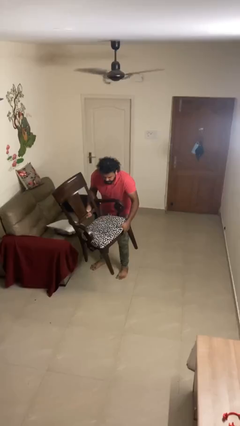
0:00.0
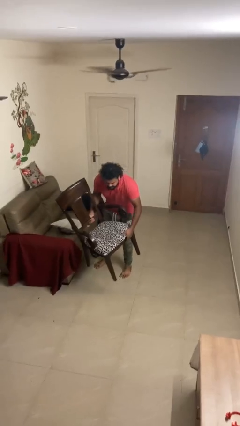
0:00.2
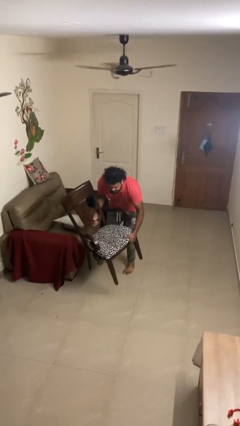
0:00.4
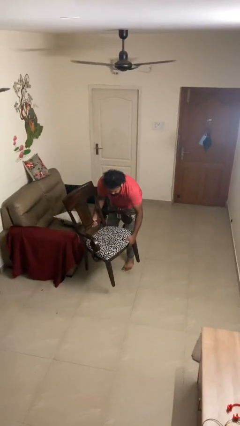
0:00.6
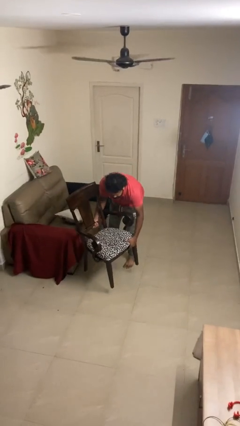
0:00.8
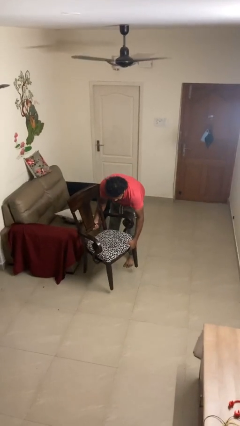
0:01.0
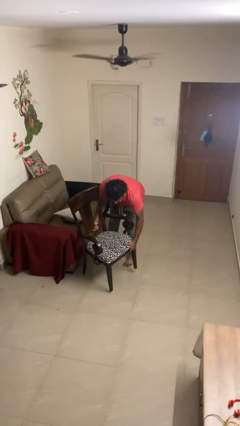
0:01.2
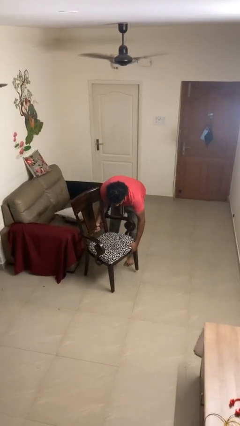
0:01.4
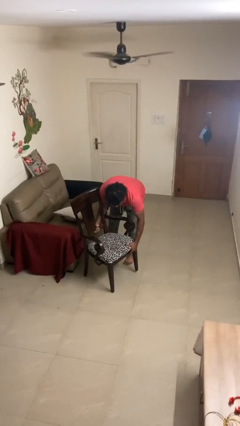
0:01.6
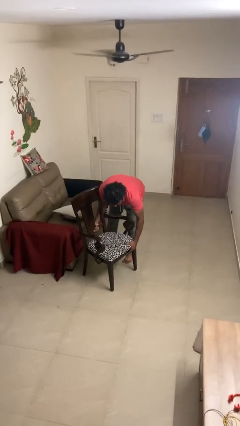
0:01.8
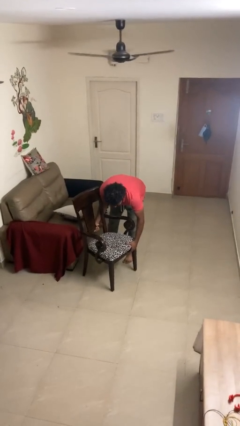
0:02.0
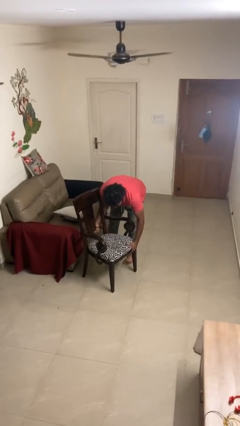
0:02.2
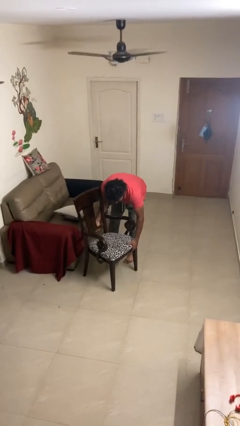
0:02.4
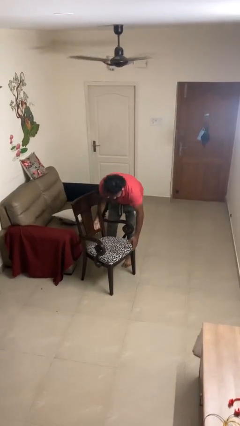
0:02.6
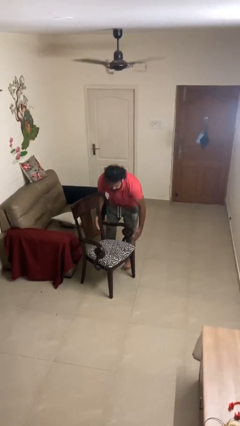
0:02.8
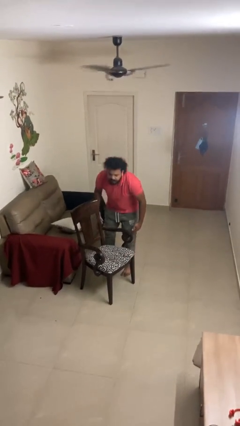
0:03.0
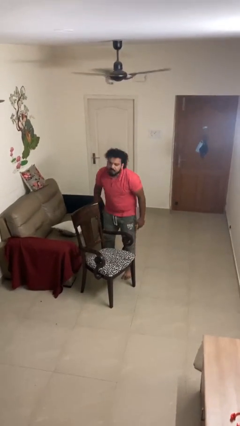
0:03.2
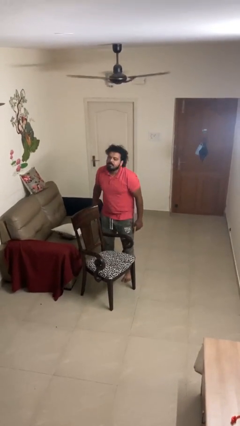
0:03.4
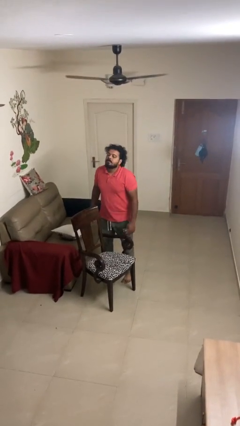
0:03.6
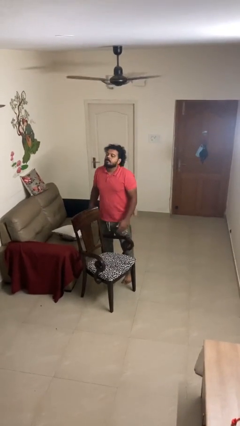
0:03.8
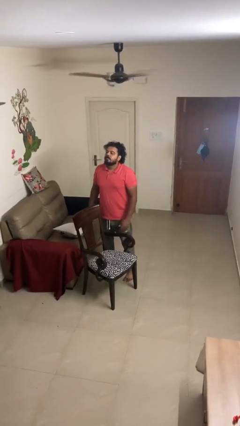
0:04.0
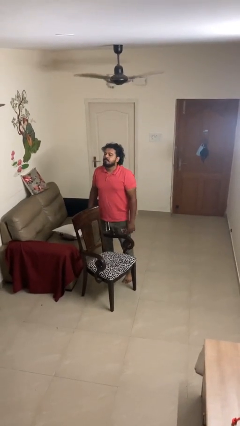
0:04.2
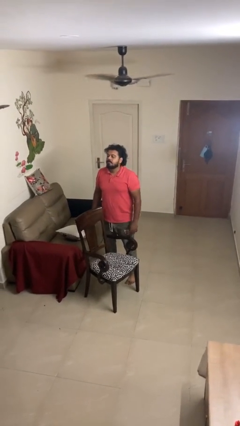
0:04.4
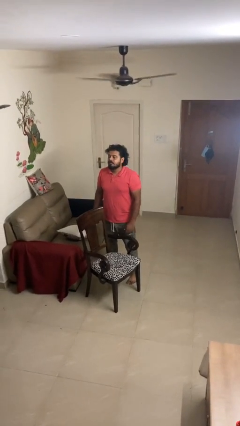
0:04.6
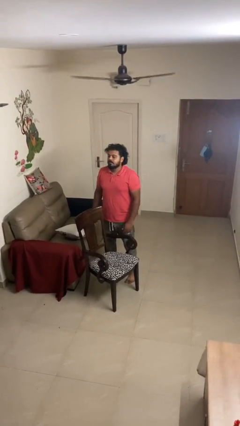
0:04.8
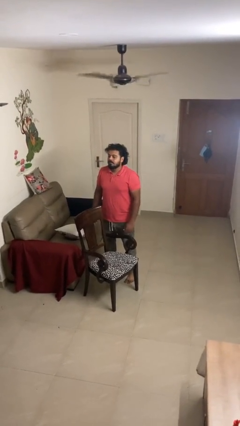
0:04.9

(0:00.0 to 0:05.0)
person puts down object on floor

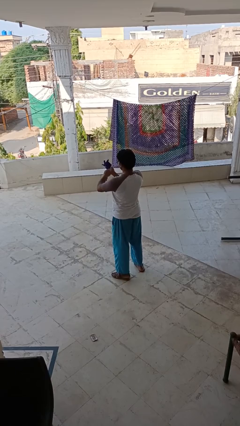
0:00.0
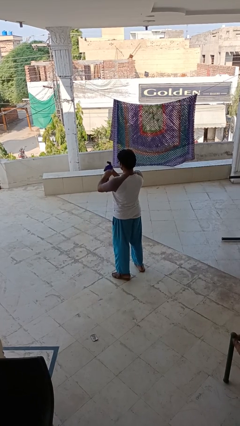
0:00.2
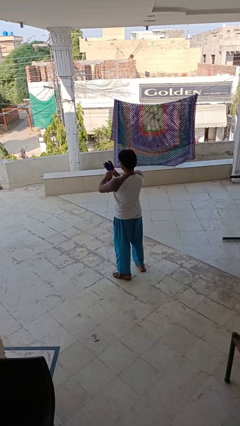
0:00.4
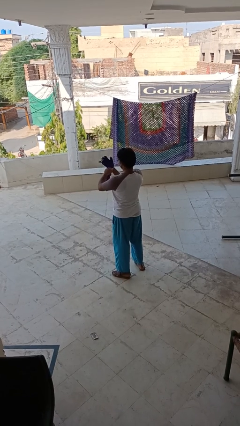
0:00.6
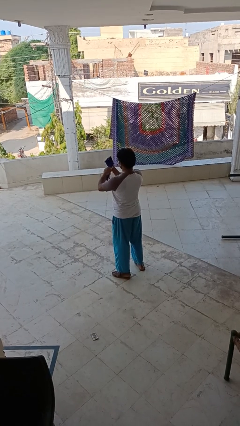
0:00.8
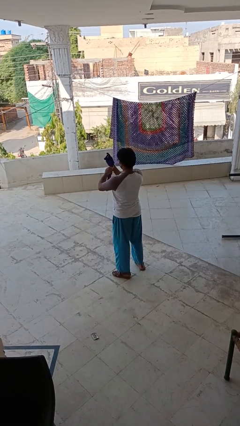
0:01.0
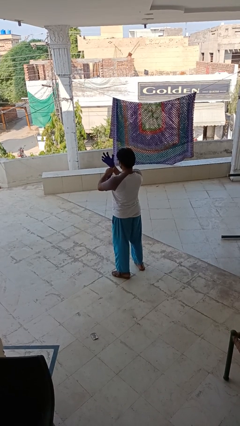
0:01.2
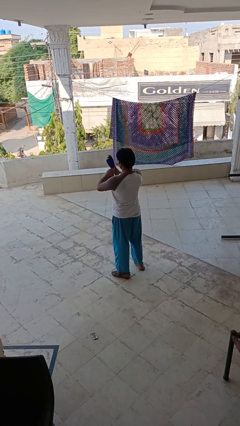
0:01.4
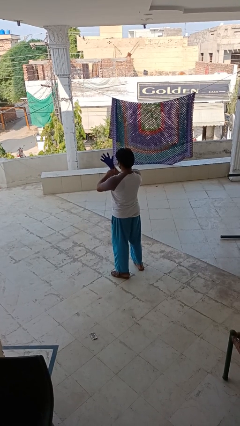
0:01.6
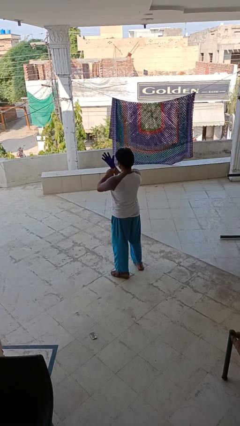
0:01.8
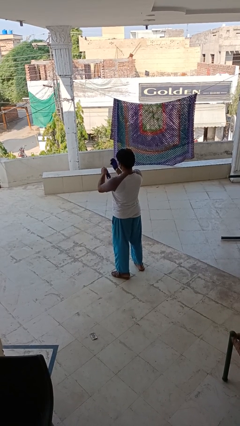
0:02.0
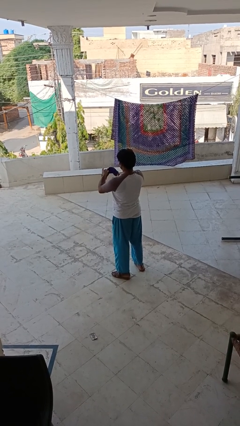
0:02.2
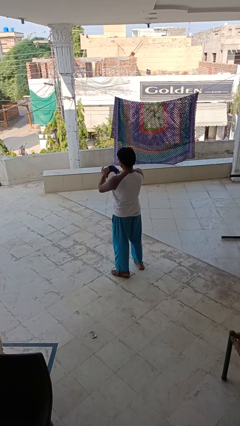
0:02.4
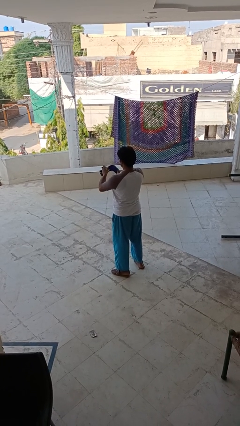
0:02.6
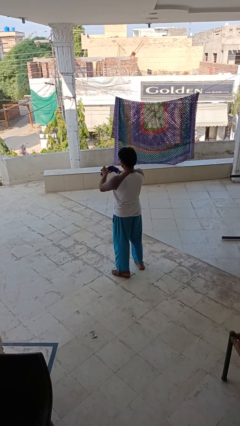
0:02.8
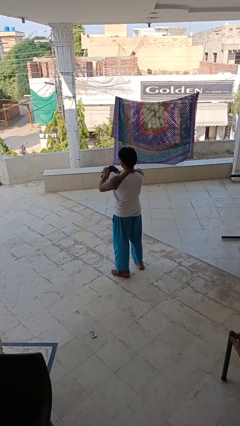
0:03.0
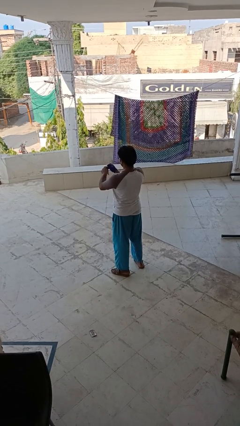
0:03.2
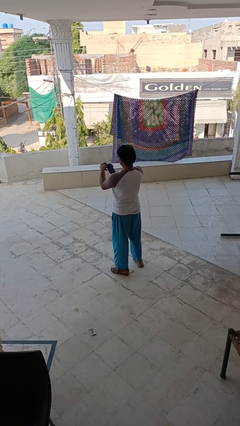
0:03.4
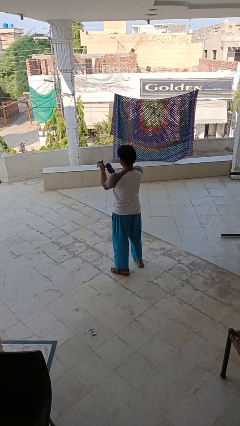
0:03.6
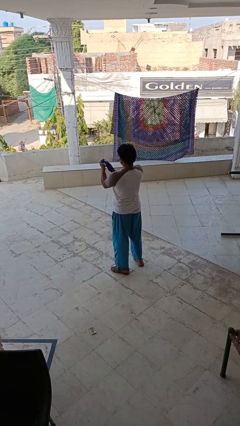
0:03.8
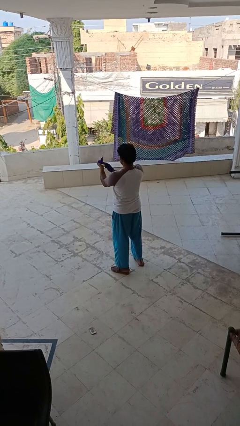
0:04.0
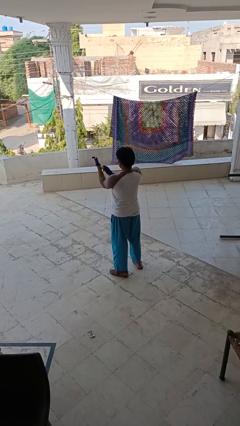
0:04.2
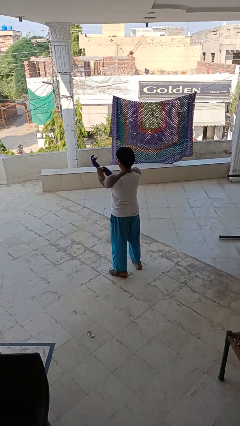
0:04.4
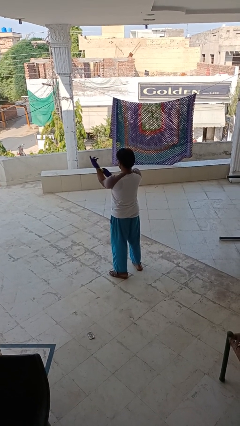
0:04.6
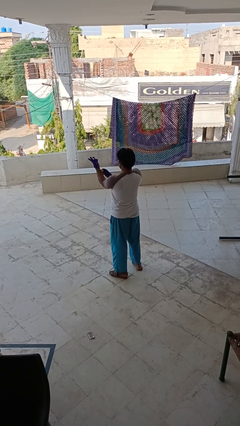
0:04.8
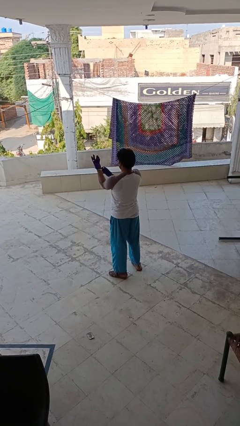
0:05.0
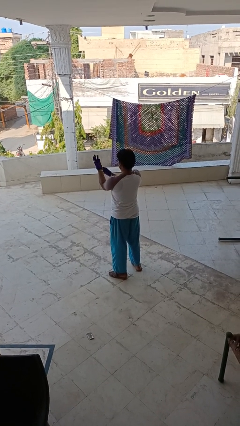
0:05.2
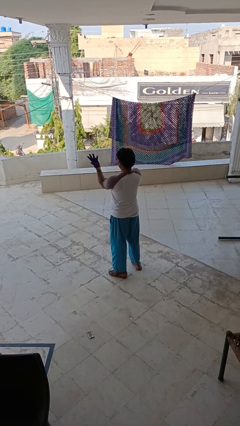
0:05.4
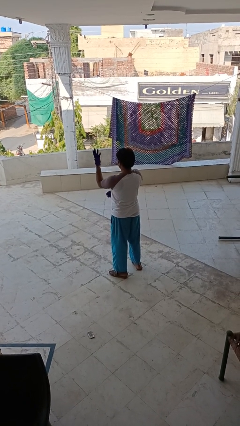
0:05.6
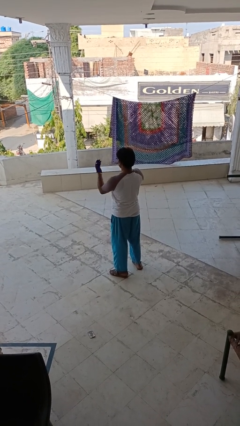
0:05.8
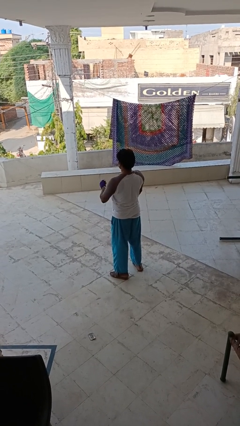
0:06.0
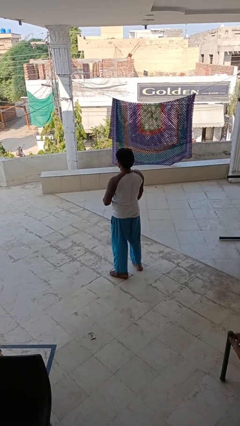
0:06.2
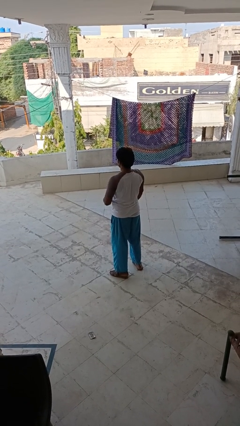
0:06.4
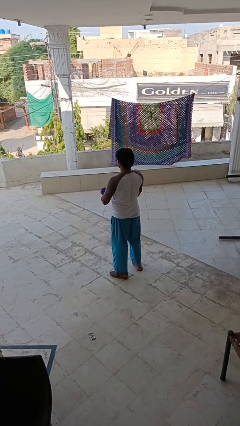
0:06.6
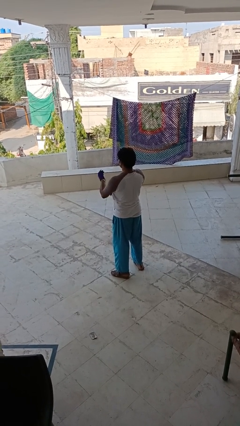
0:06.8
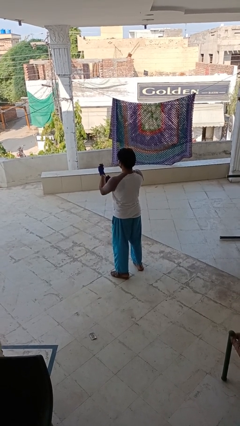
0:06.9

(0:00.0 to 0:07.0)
person puts on gloves

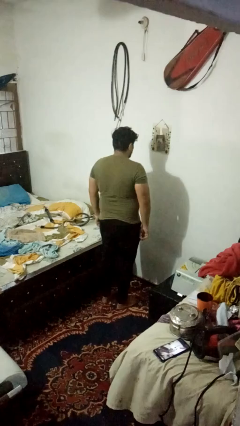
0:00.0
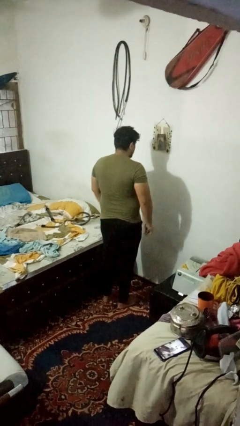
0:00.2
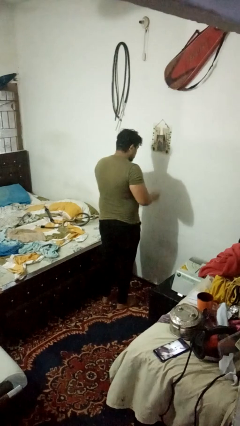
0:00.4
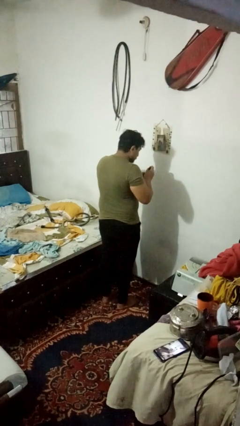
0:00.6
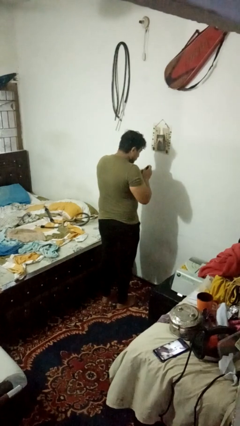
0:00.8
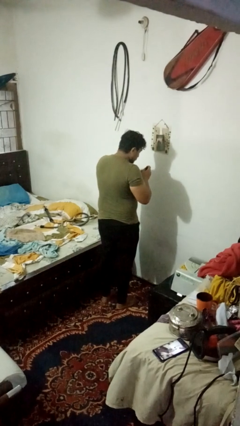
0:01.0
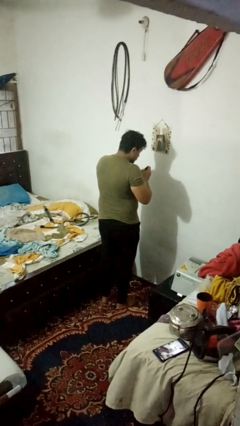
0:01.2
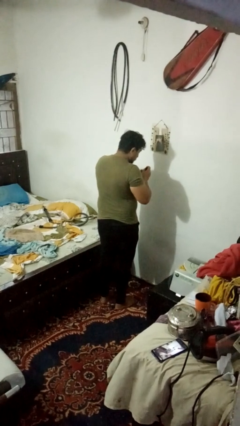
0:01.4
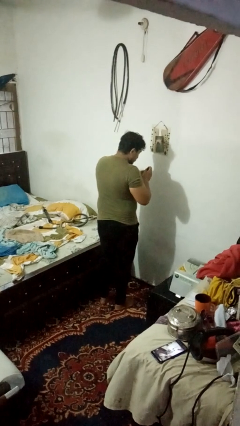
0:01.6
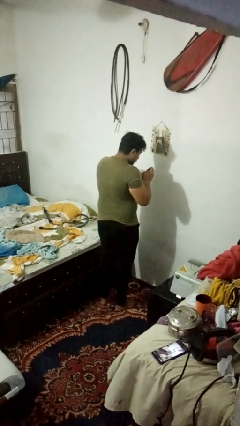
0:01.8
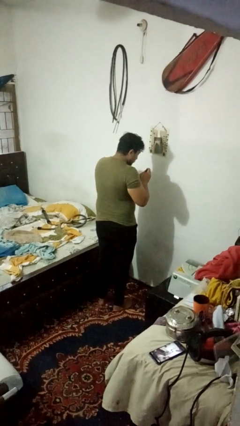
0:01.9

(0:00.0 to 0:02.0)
person paints fingernails

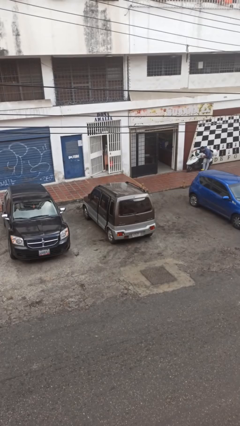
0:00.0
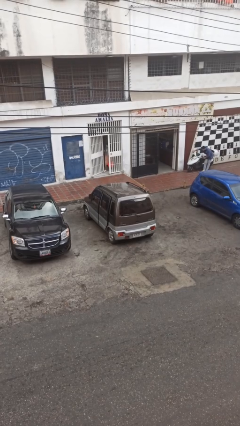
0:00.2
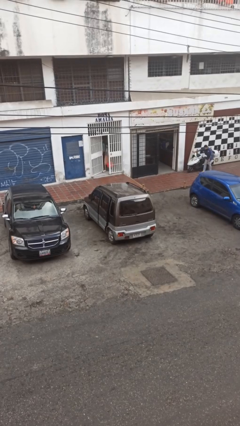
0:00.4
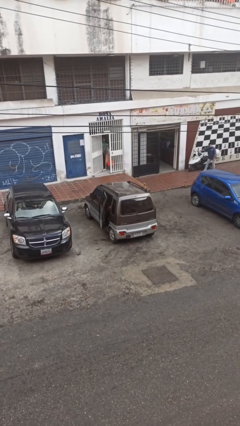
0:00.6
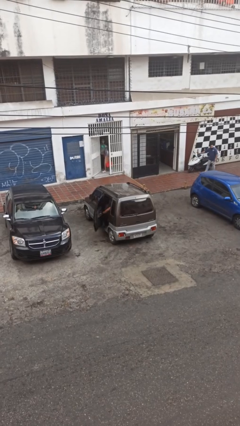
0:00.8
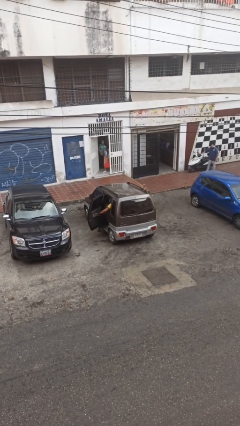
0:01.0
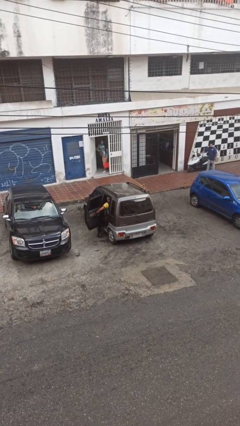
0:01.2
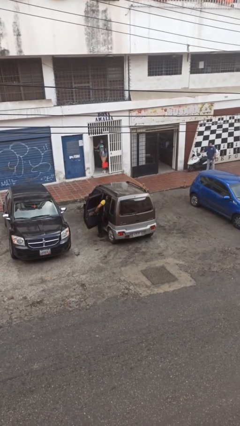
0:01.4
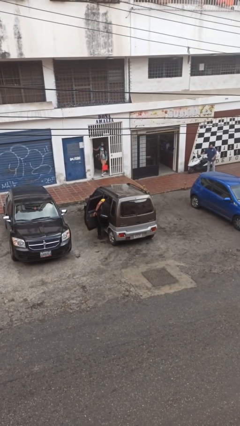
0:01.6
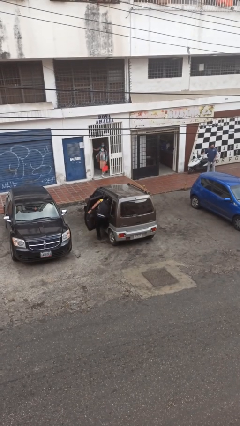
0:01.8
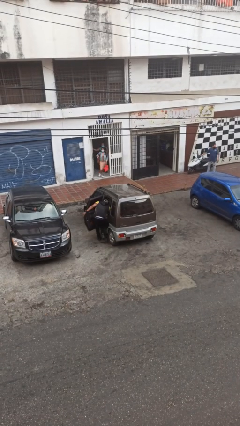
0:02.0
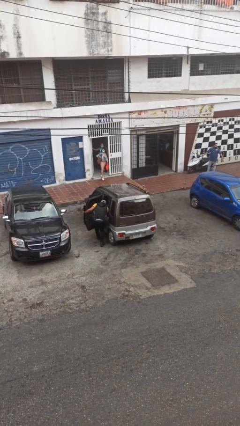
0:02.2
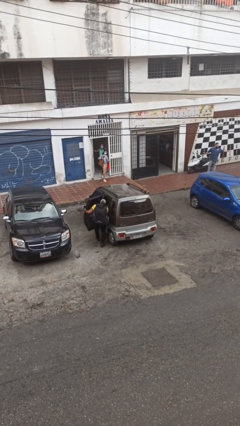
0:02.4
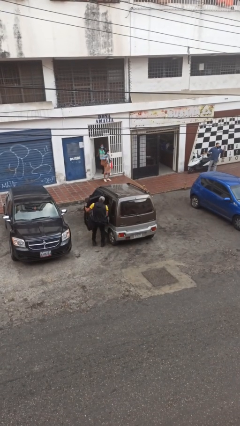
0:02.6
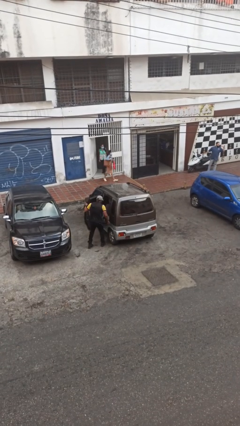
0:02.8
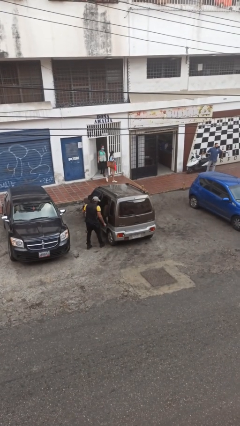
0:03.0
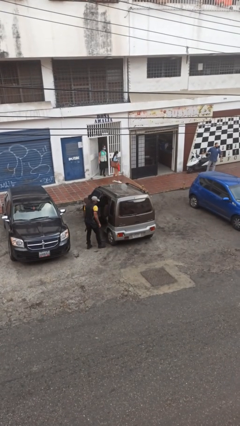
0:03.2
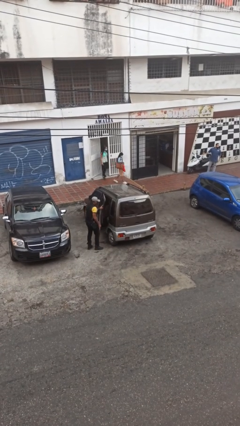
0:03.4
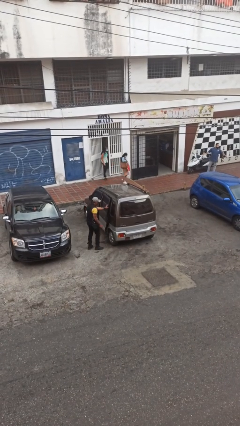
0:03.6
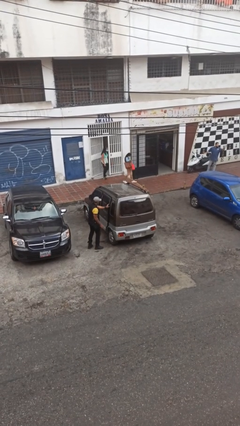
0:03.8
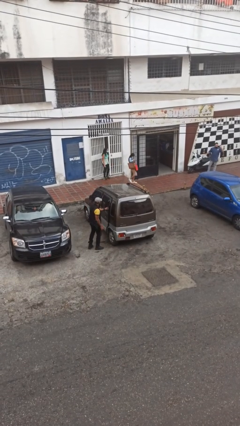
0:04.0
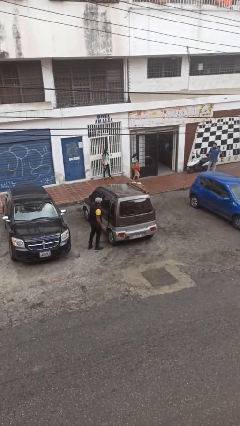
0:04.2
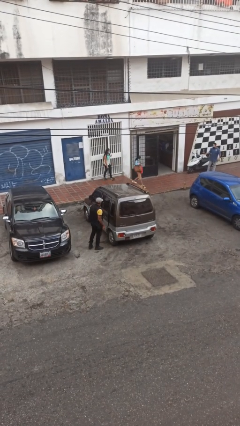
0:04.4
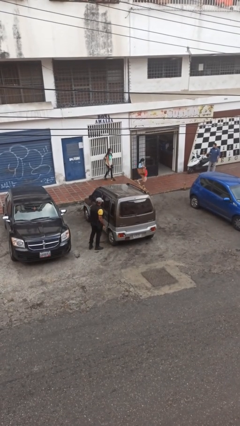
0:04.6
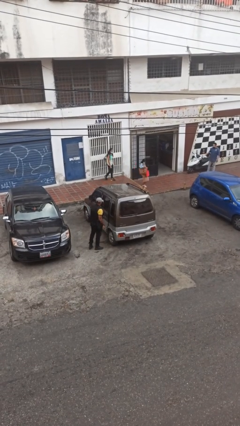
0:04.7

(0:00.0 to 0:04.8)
car drops off person
